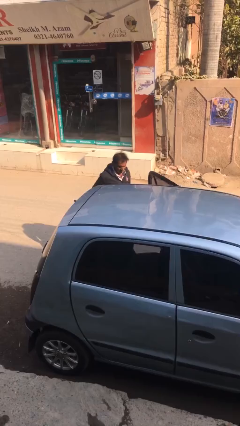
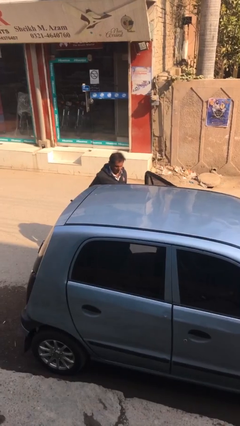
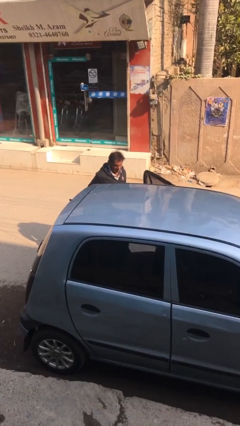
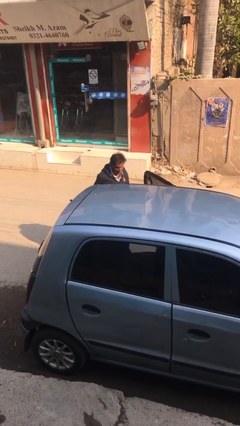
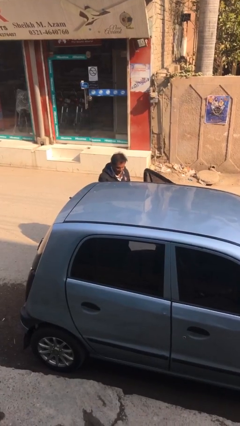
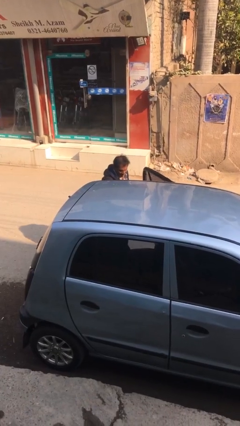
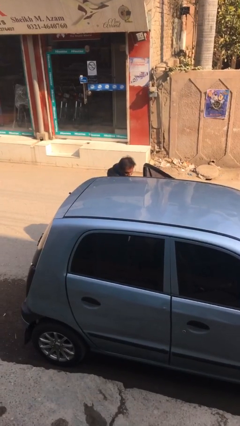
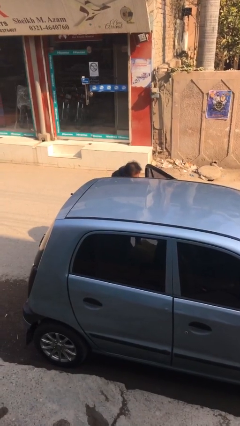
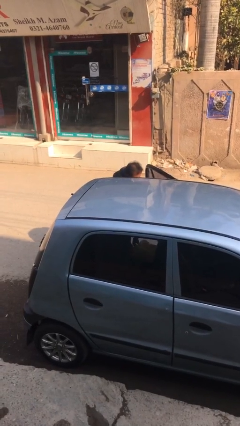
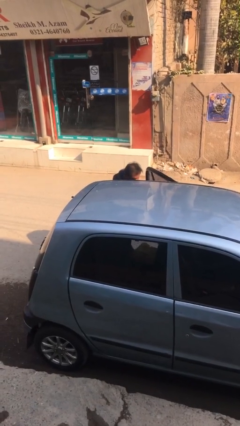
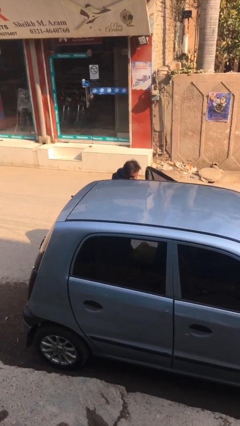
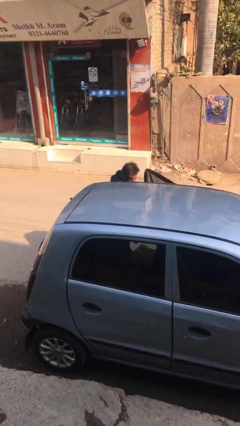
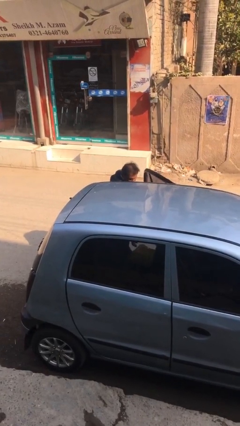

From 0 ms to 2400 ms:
person loads car

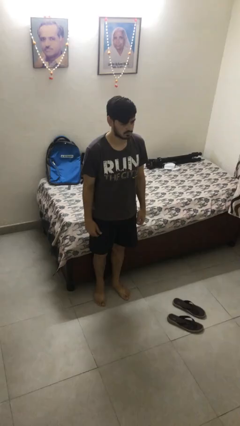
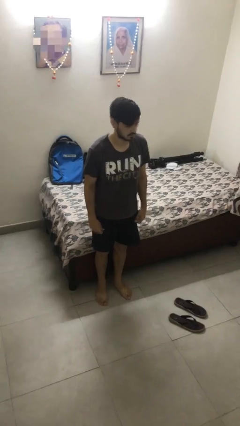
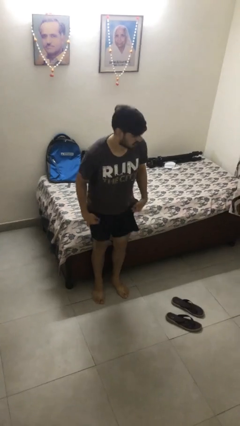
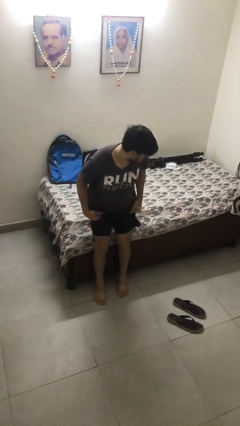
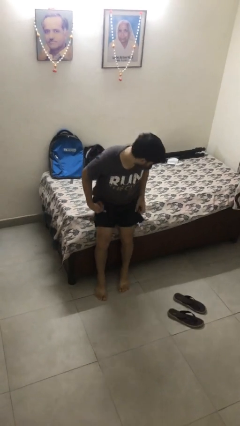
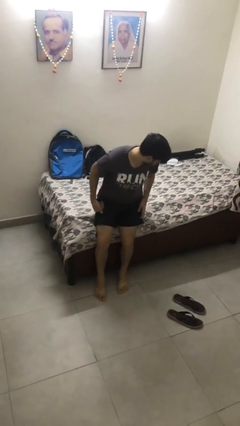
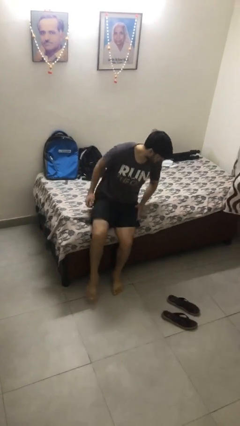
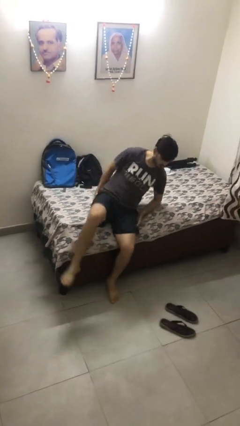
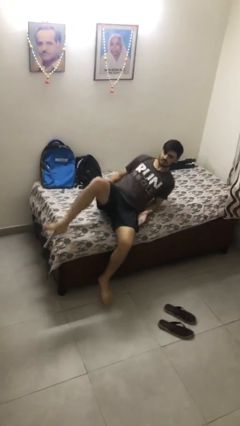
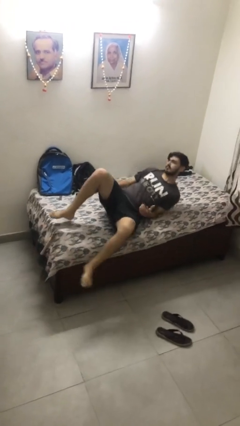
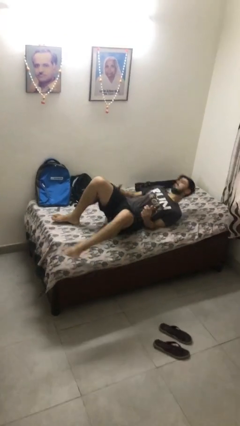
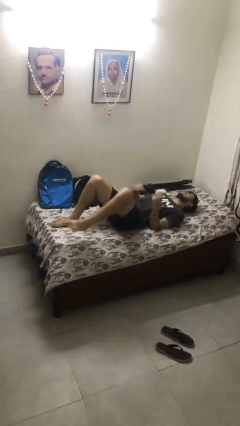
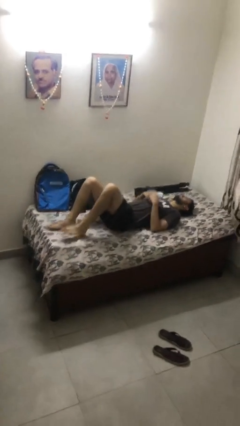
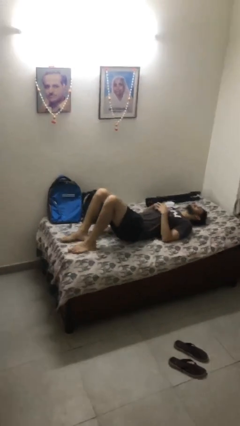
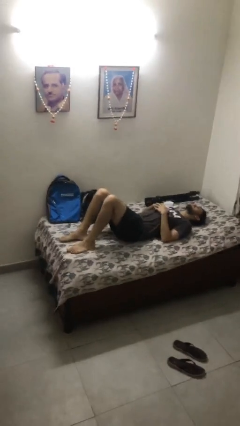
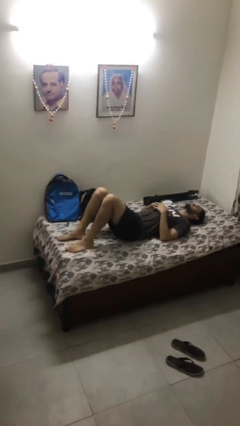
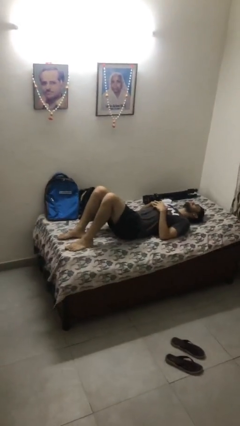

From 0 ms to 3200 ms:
person lies down on bed

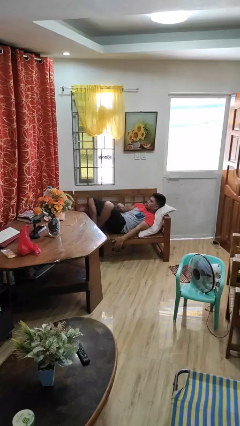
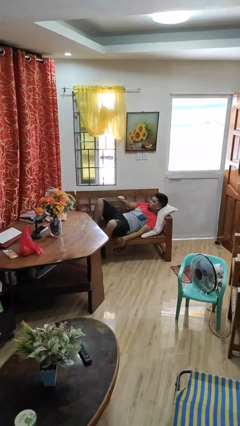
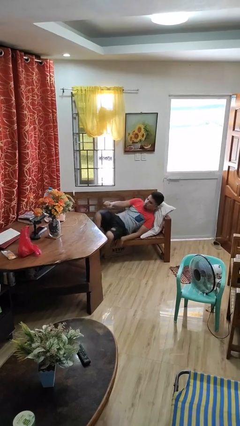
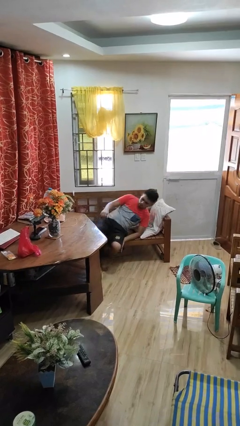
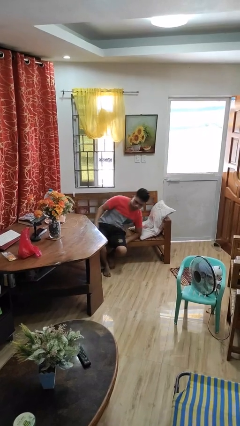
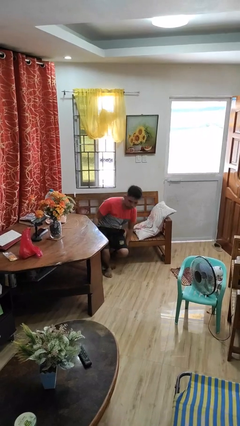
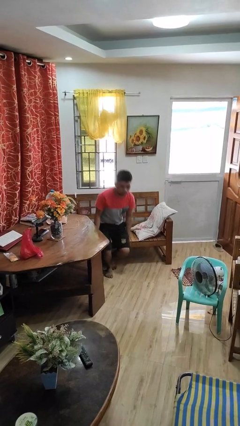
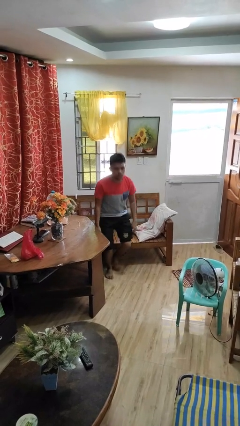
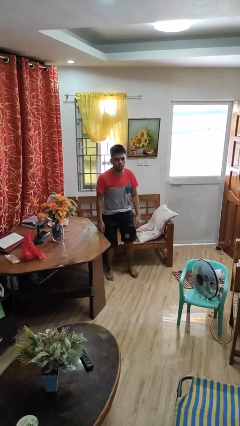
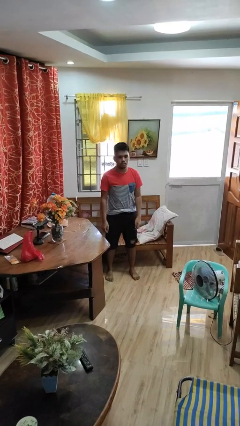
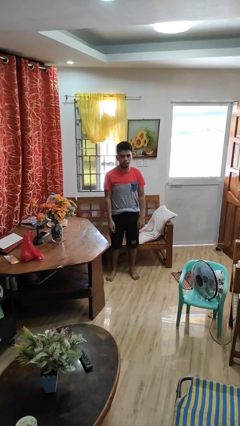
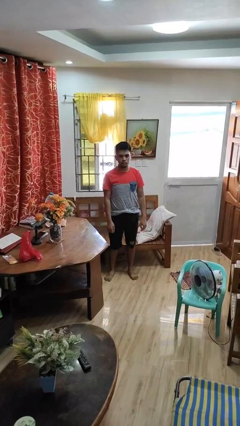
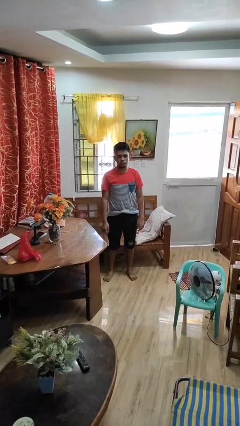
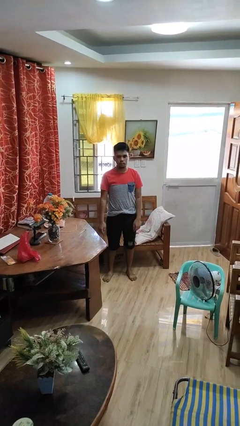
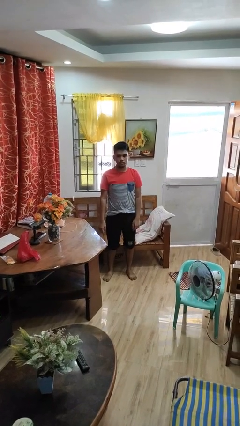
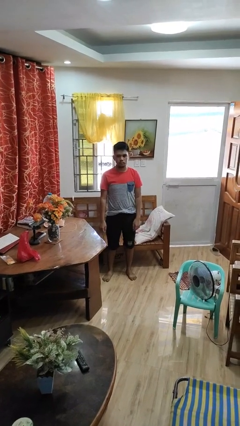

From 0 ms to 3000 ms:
person stands up

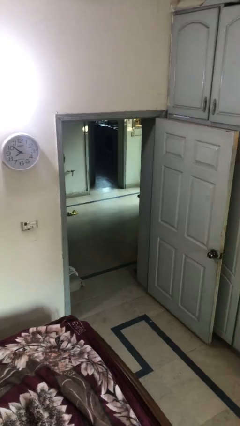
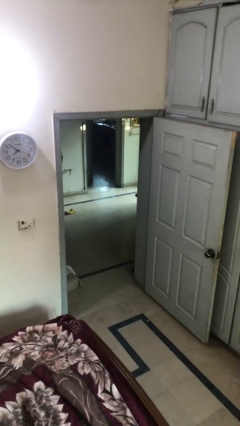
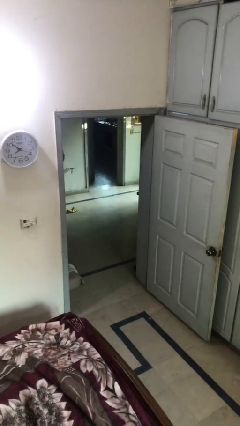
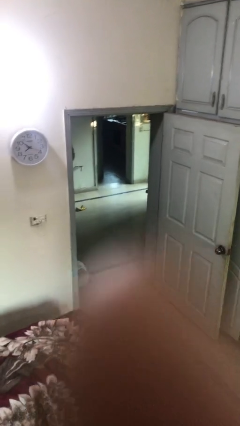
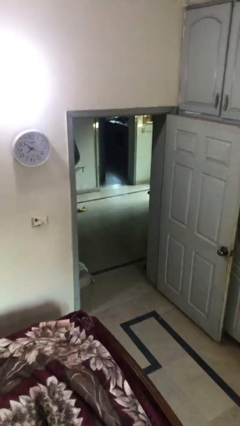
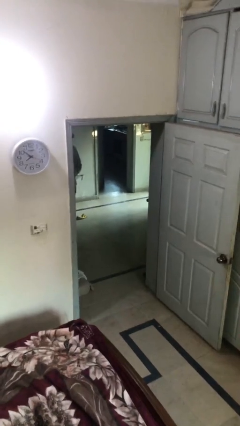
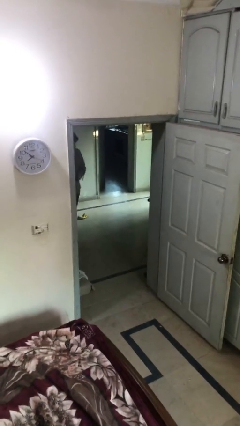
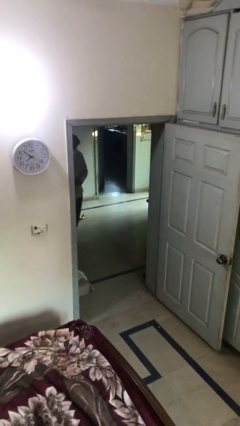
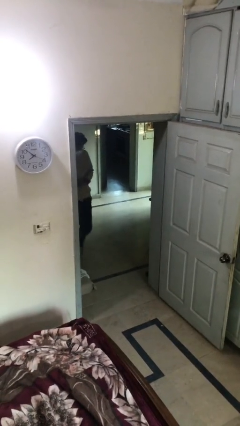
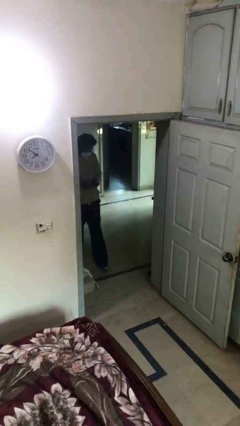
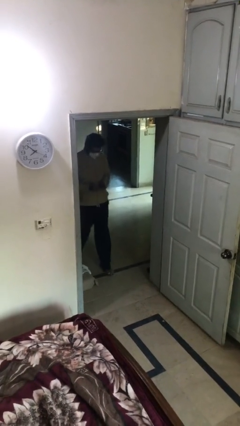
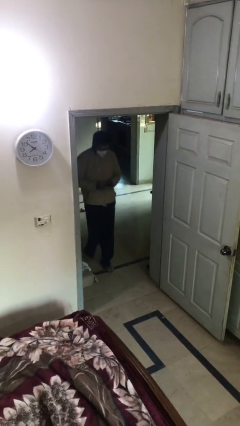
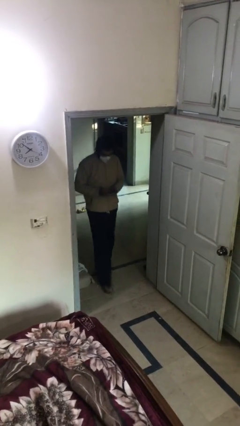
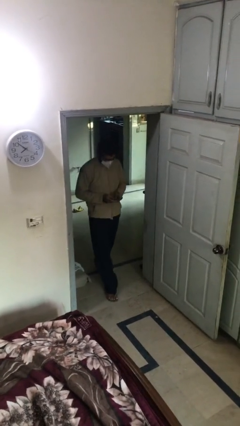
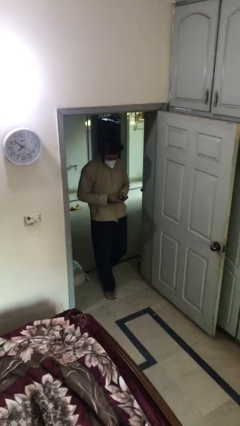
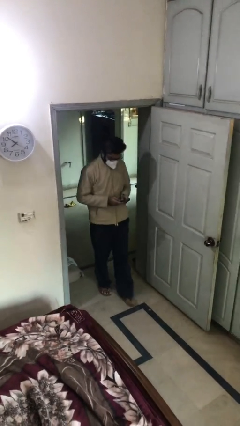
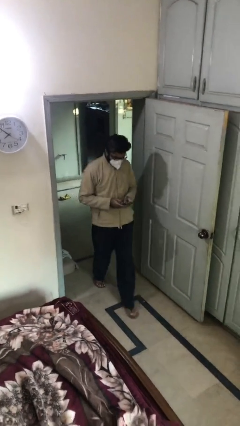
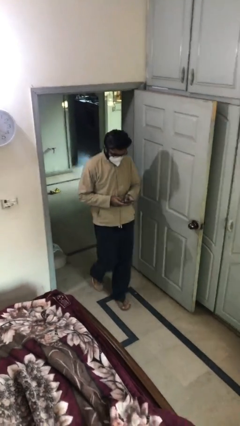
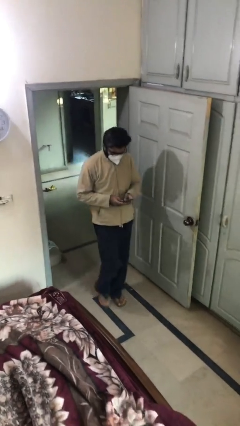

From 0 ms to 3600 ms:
person enters scene through structure

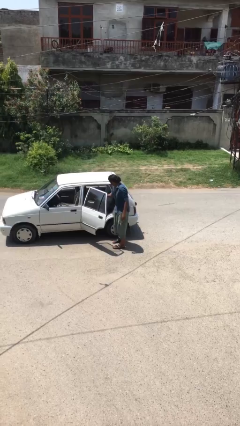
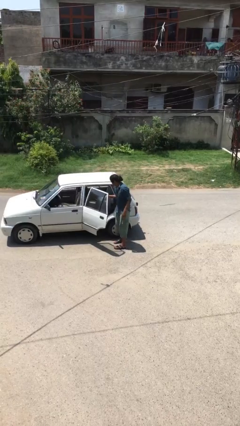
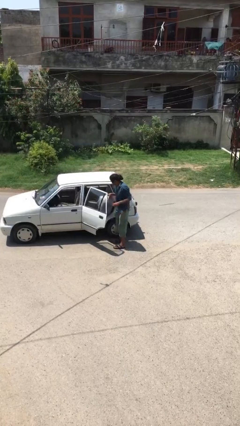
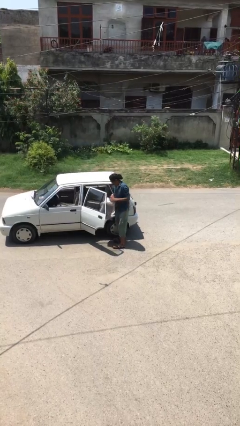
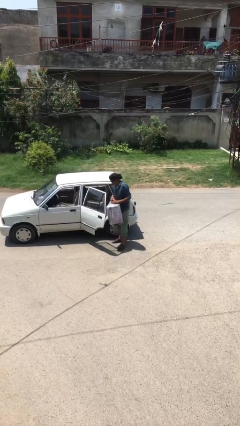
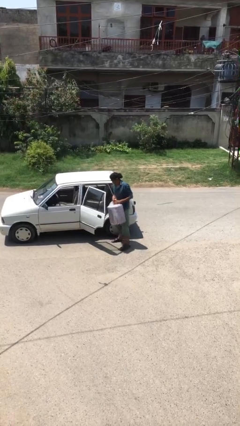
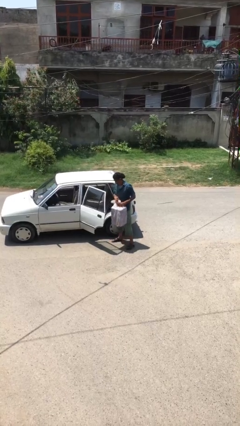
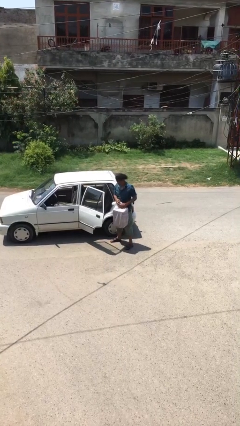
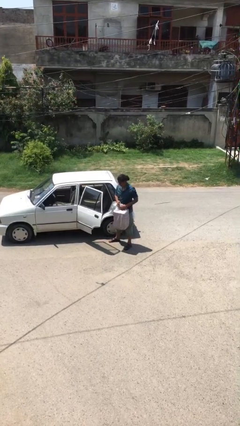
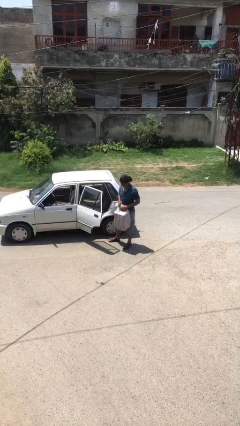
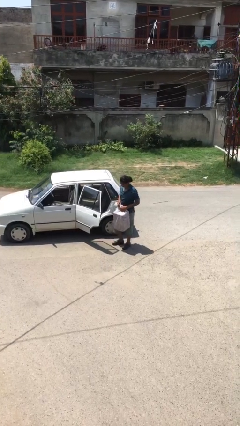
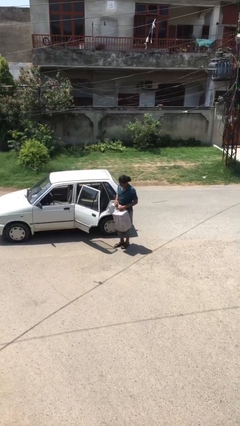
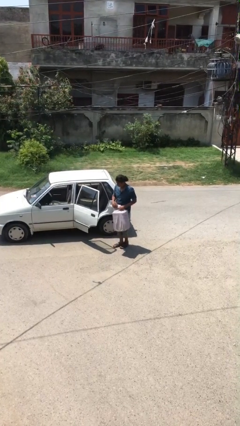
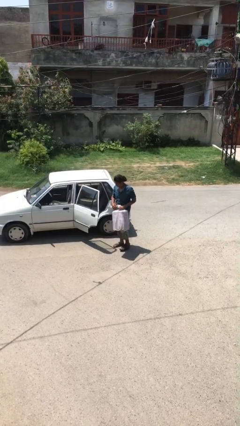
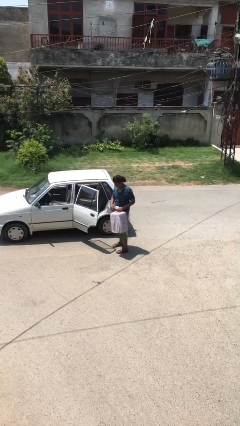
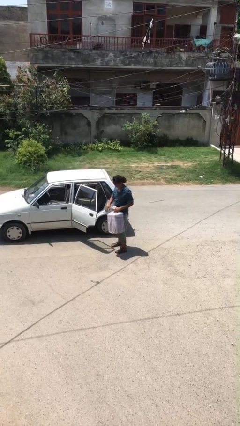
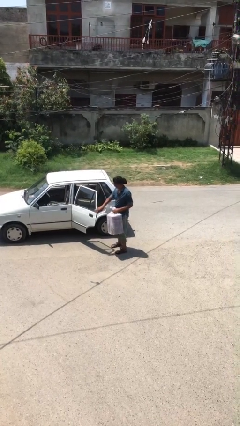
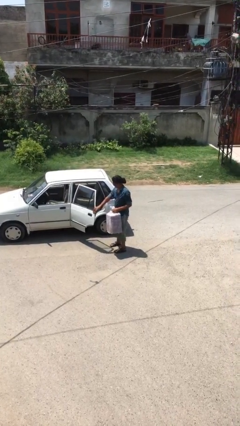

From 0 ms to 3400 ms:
person unloads car

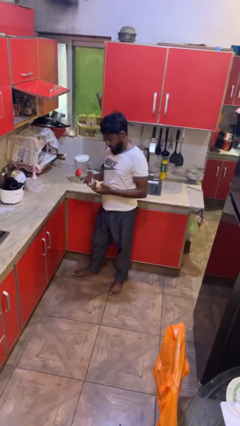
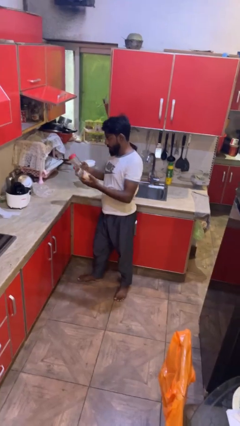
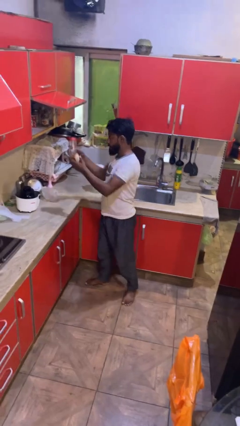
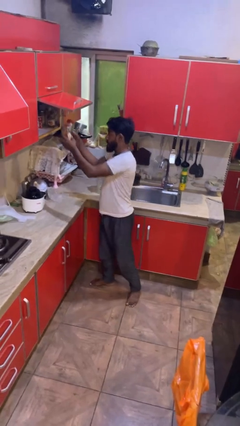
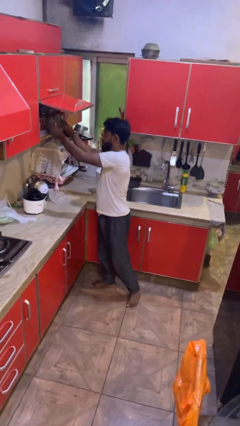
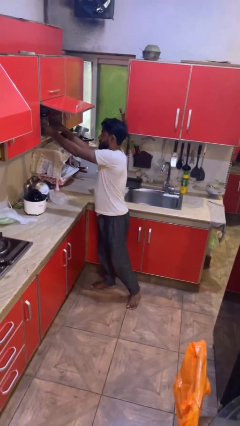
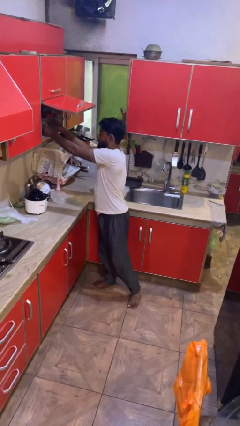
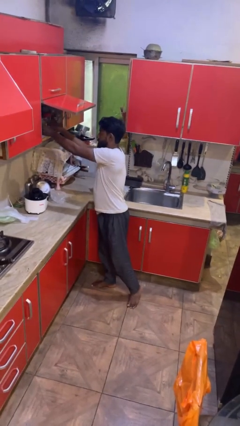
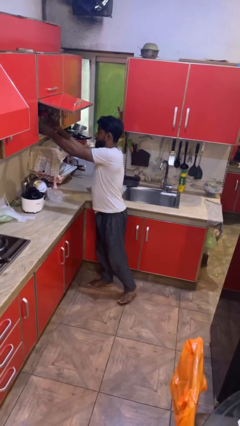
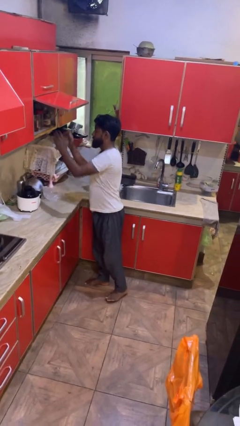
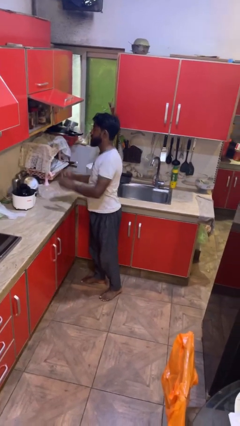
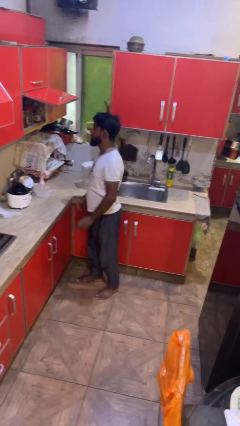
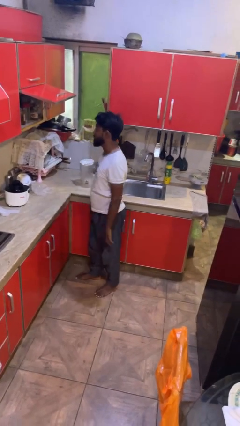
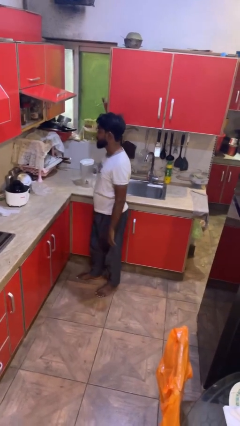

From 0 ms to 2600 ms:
person puts down object into cabinet
